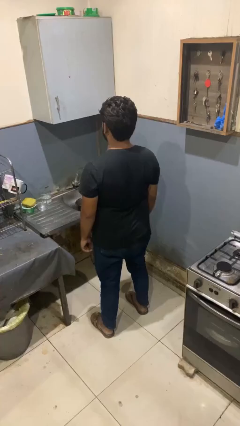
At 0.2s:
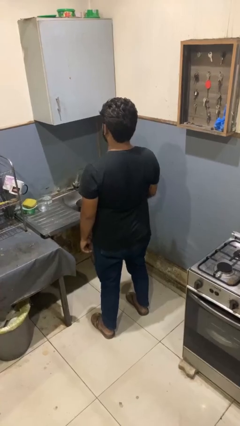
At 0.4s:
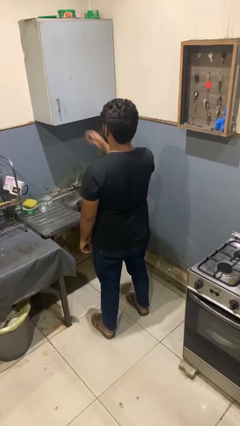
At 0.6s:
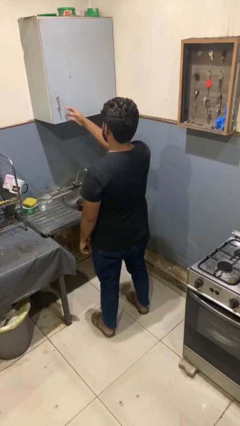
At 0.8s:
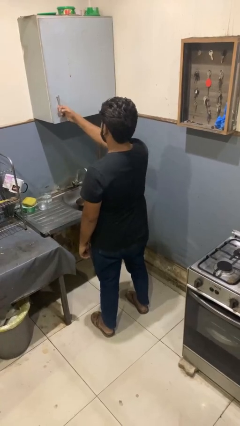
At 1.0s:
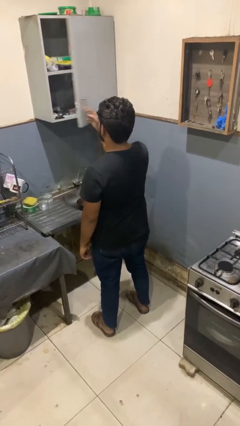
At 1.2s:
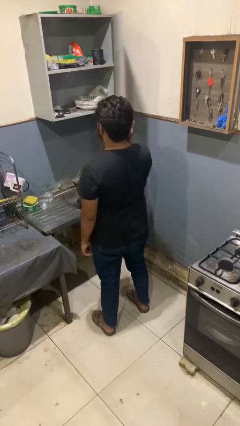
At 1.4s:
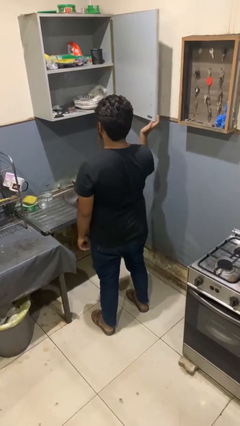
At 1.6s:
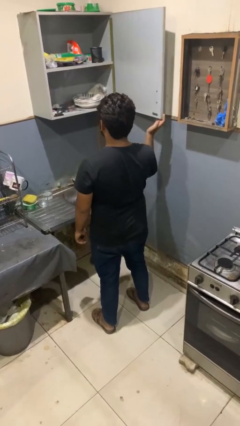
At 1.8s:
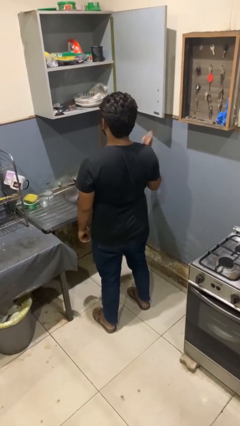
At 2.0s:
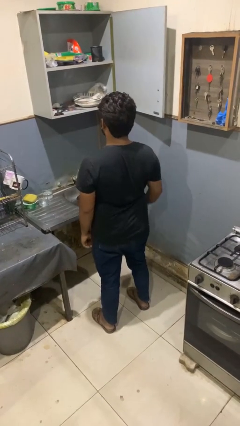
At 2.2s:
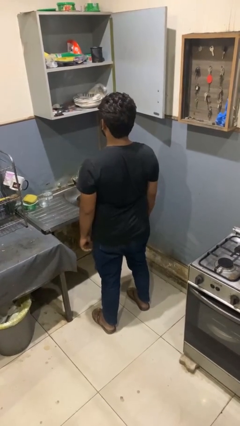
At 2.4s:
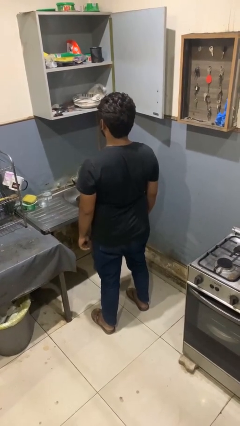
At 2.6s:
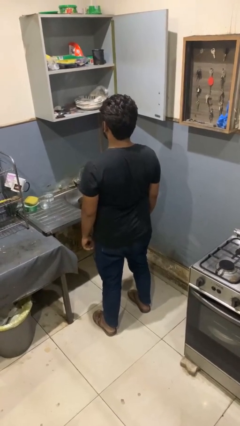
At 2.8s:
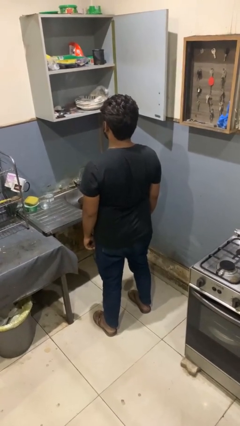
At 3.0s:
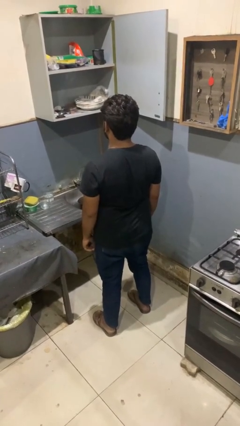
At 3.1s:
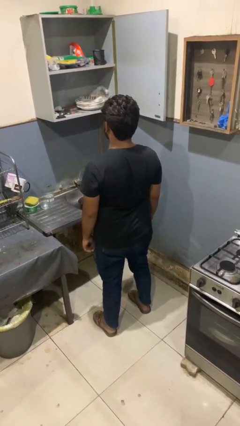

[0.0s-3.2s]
person opens kitchen drawer

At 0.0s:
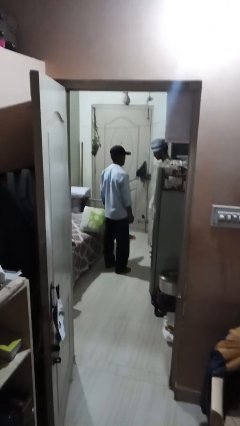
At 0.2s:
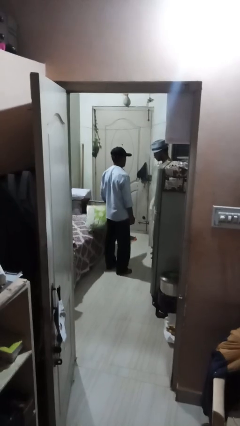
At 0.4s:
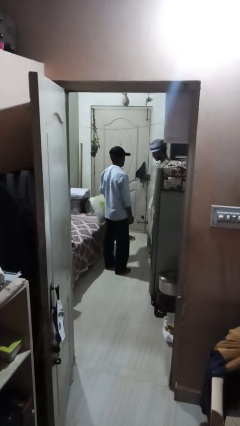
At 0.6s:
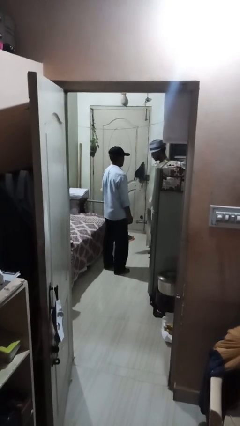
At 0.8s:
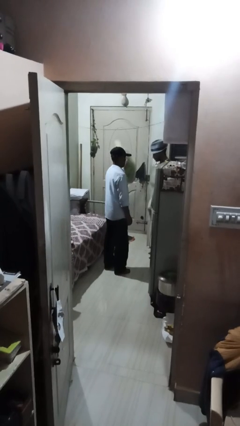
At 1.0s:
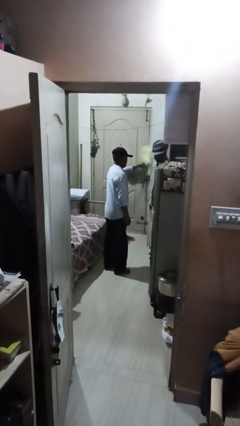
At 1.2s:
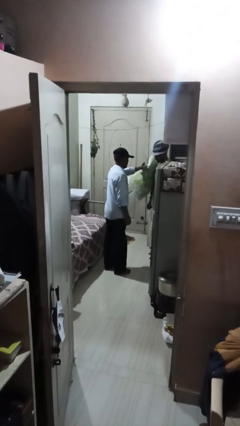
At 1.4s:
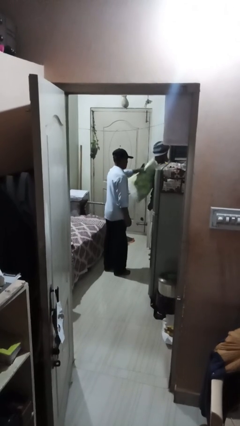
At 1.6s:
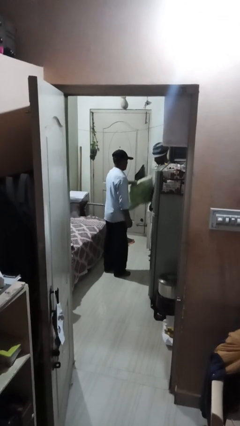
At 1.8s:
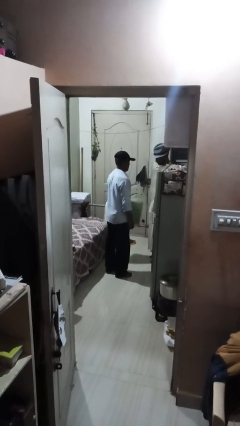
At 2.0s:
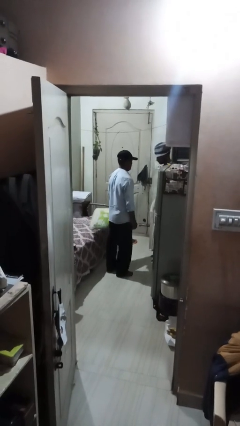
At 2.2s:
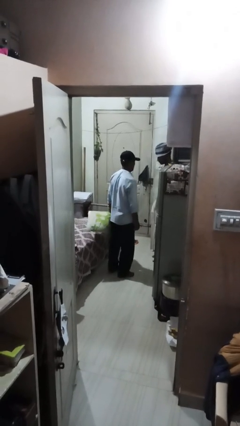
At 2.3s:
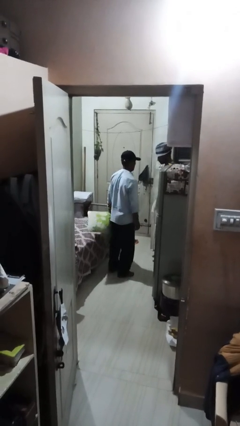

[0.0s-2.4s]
person hits person with pillow

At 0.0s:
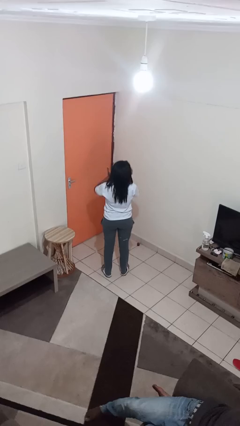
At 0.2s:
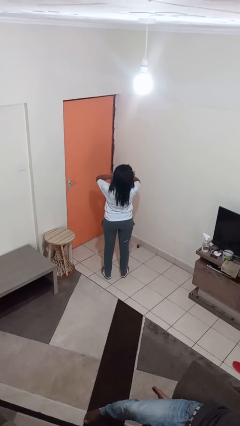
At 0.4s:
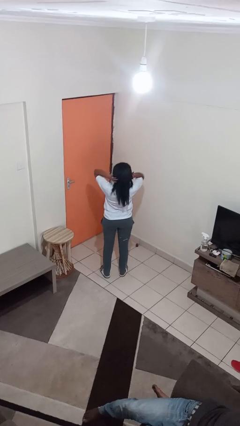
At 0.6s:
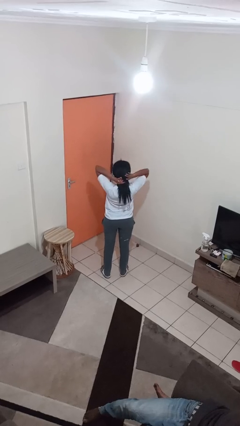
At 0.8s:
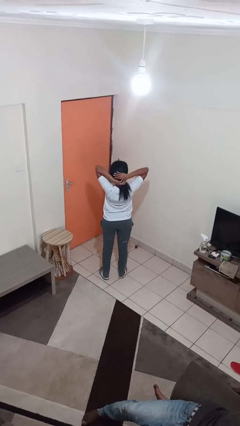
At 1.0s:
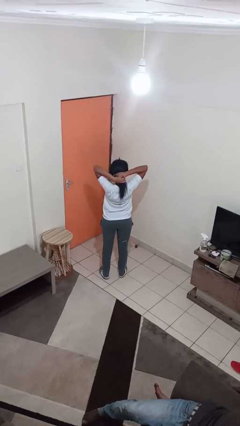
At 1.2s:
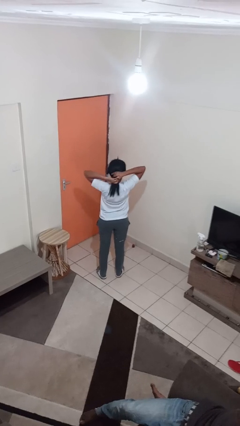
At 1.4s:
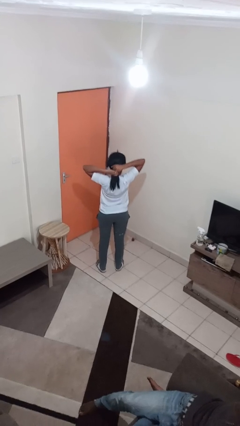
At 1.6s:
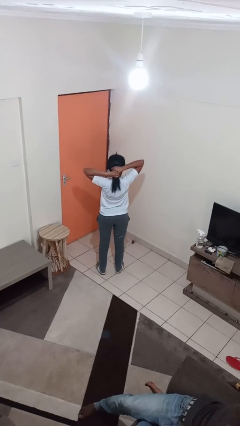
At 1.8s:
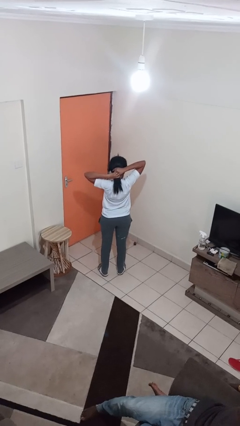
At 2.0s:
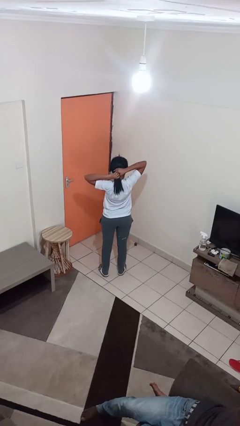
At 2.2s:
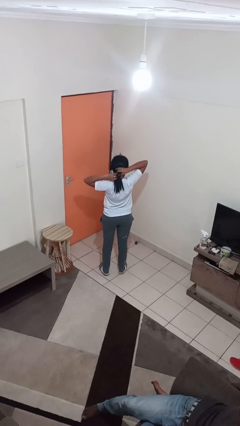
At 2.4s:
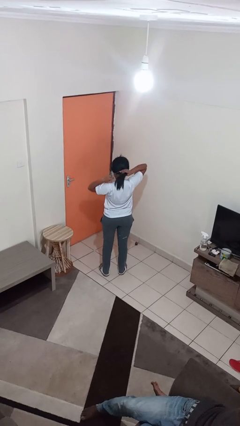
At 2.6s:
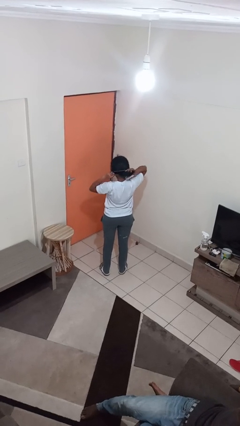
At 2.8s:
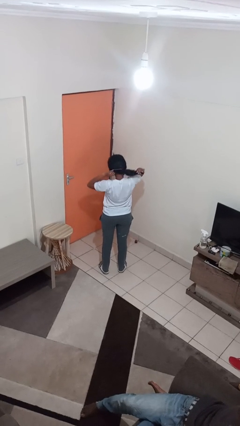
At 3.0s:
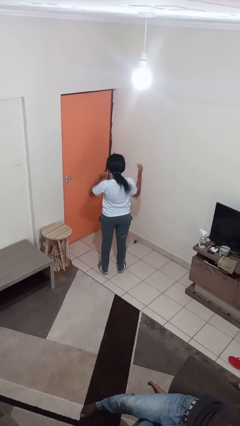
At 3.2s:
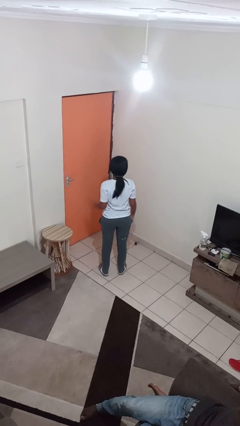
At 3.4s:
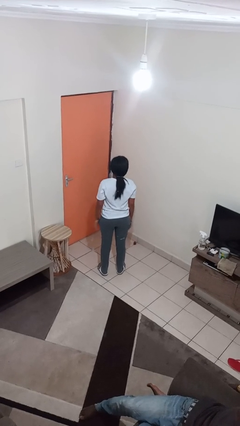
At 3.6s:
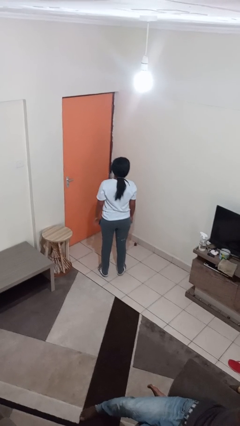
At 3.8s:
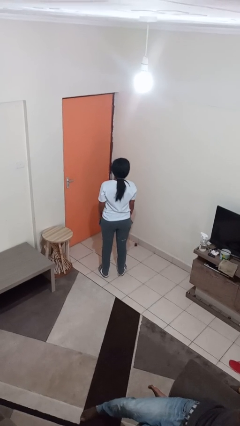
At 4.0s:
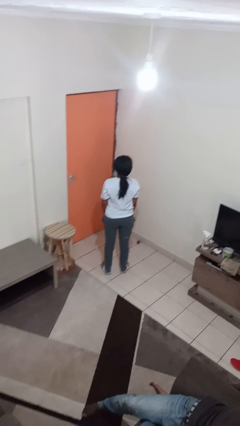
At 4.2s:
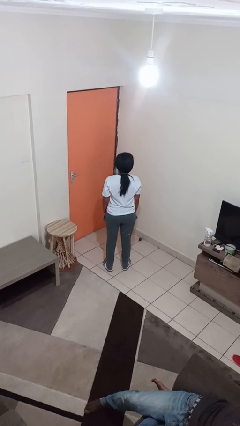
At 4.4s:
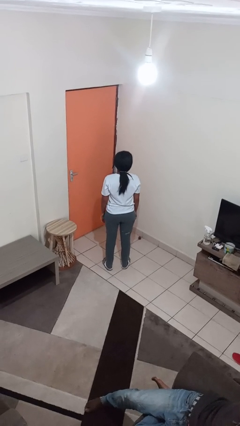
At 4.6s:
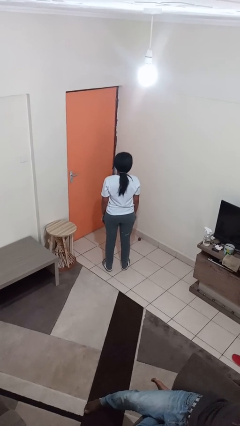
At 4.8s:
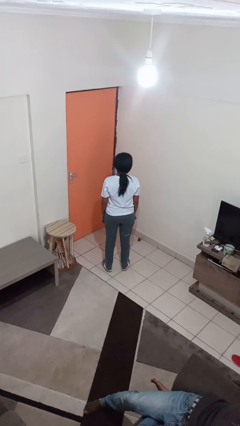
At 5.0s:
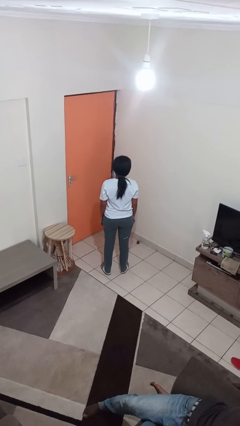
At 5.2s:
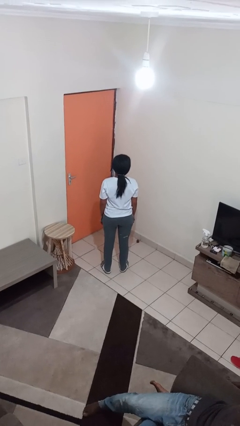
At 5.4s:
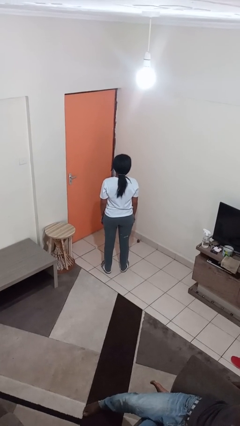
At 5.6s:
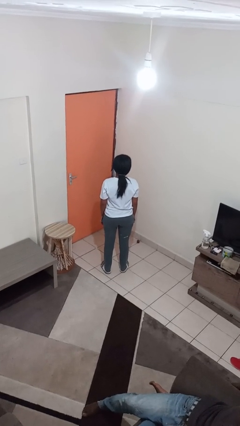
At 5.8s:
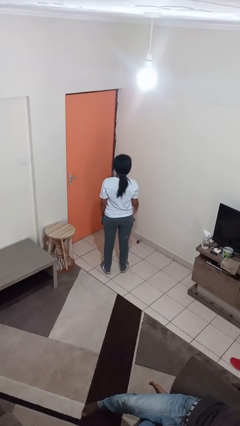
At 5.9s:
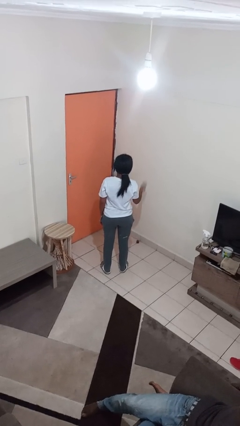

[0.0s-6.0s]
person puts hair in ponytail

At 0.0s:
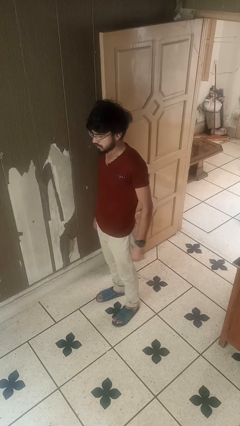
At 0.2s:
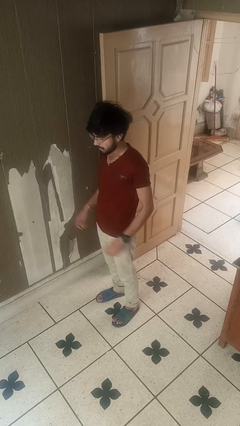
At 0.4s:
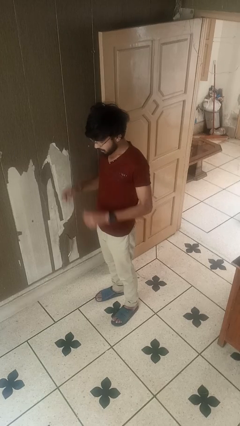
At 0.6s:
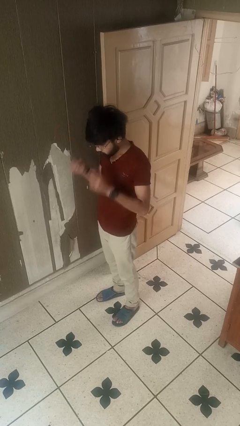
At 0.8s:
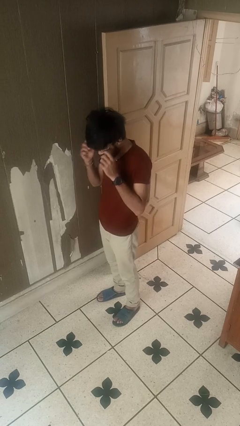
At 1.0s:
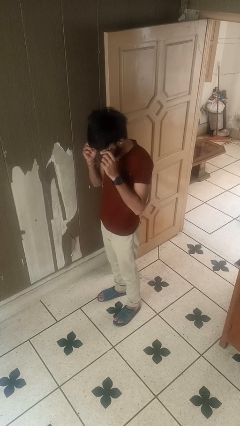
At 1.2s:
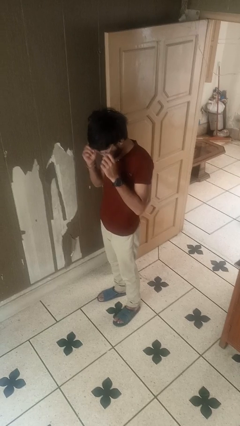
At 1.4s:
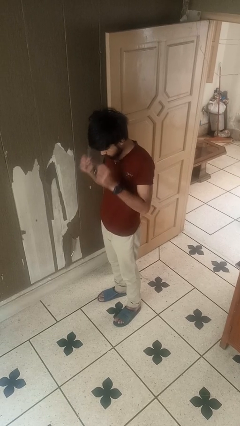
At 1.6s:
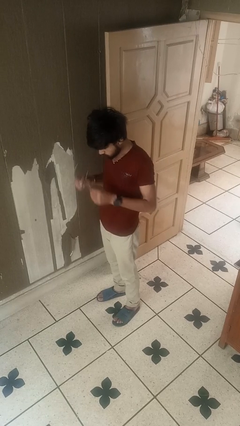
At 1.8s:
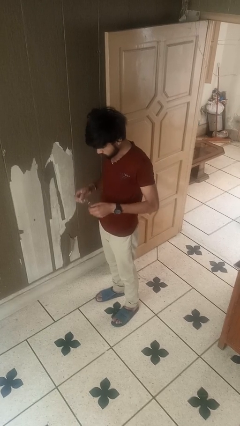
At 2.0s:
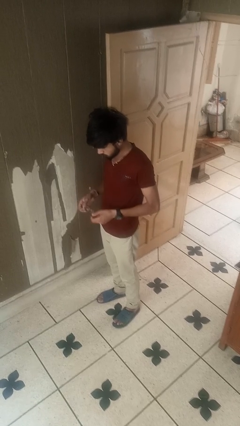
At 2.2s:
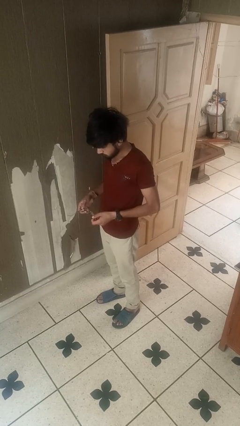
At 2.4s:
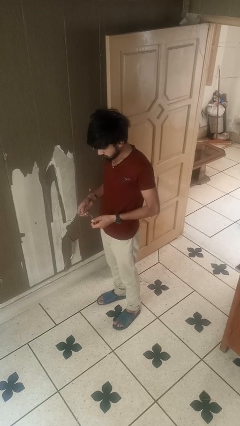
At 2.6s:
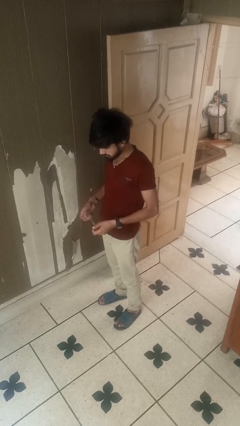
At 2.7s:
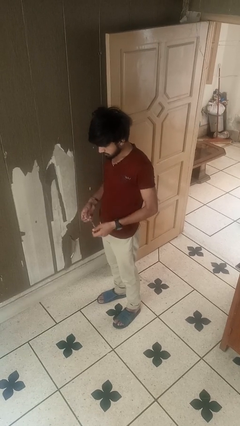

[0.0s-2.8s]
person takes off glasses

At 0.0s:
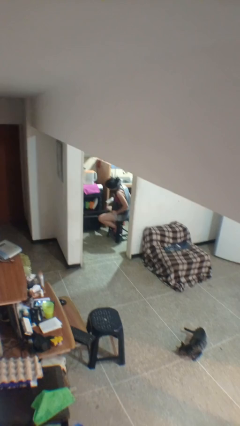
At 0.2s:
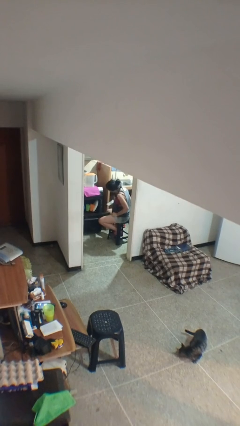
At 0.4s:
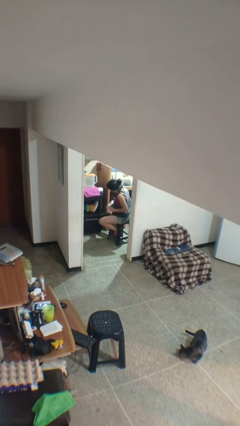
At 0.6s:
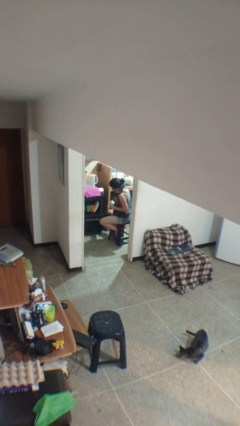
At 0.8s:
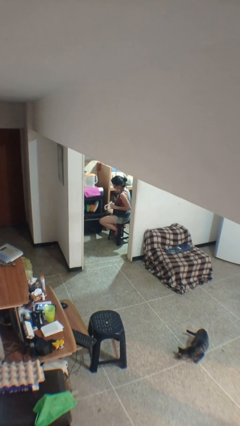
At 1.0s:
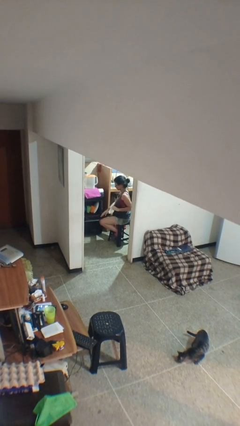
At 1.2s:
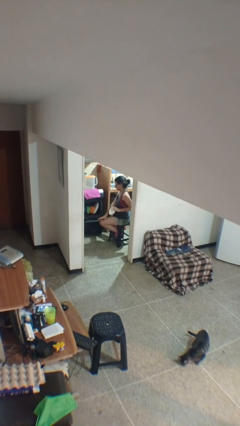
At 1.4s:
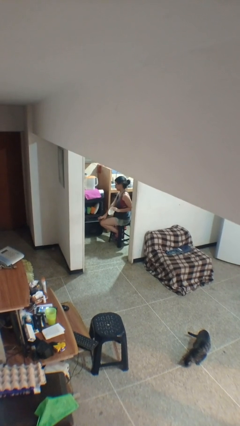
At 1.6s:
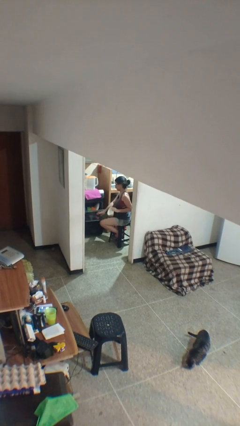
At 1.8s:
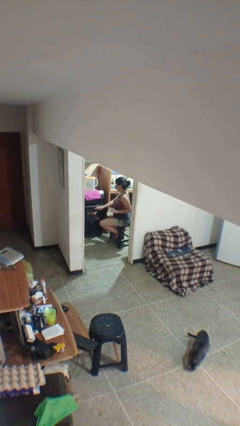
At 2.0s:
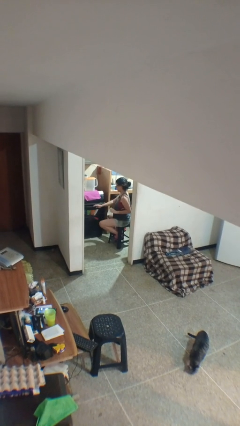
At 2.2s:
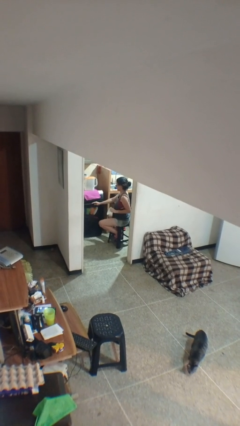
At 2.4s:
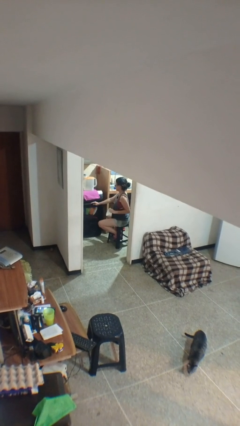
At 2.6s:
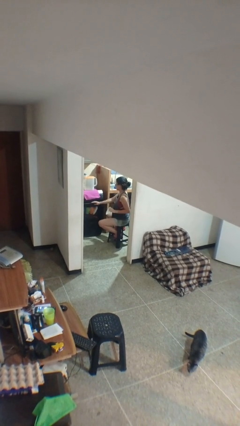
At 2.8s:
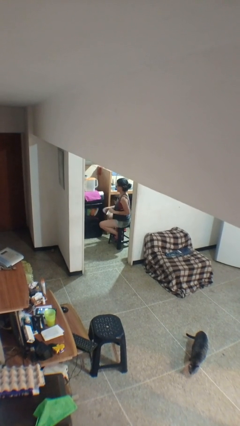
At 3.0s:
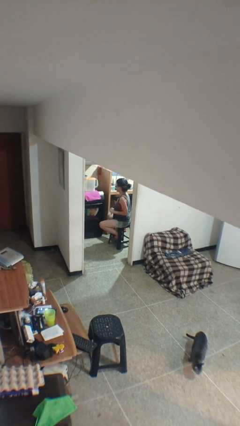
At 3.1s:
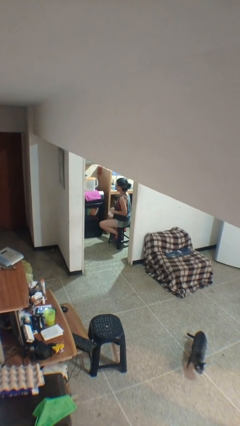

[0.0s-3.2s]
person closes dishwasher

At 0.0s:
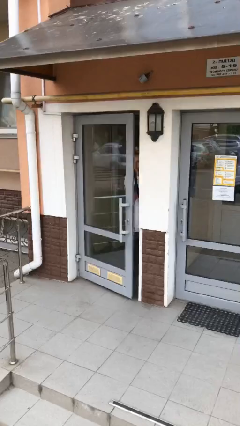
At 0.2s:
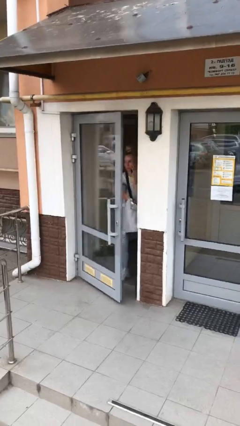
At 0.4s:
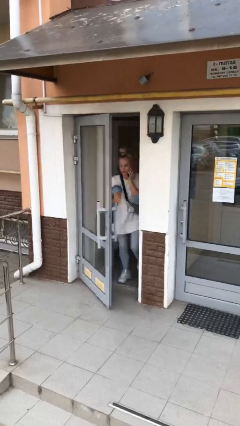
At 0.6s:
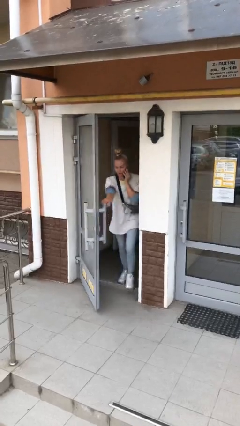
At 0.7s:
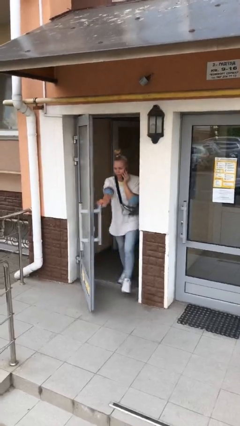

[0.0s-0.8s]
person opens facility door
